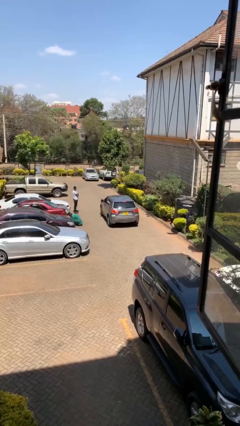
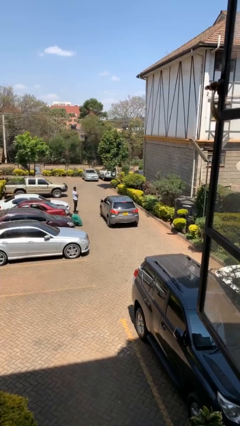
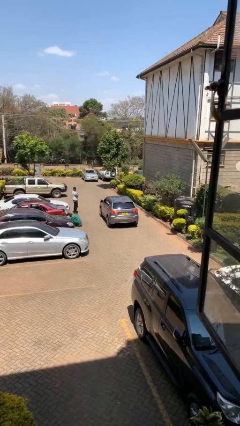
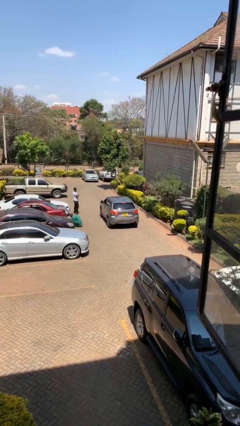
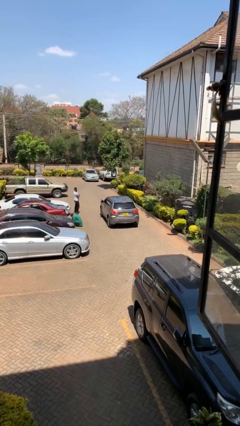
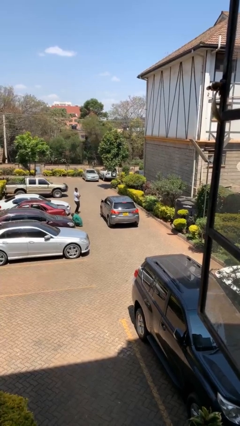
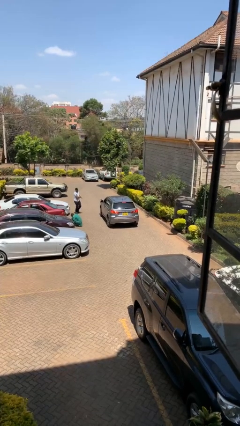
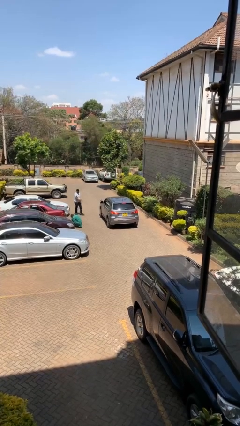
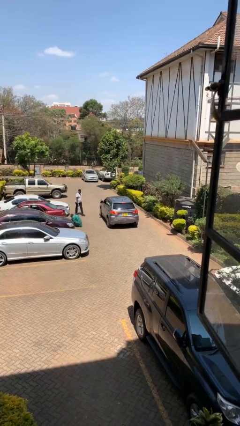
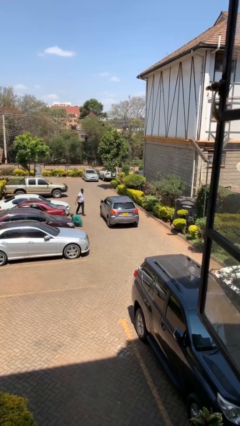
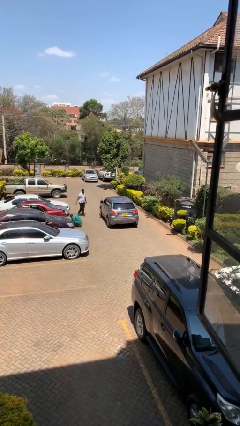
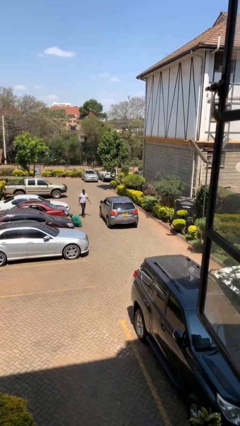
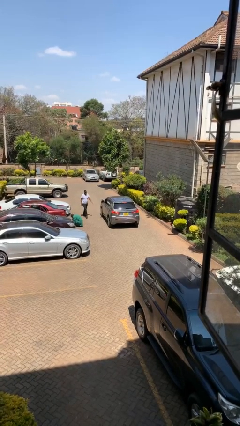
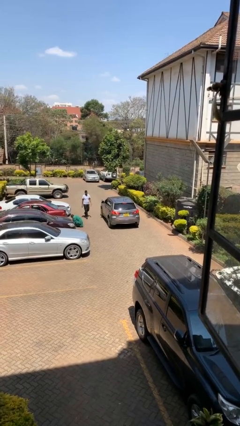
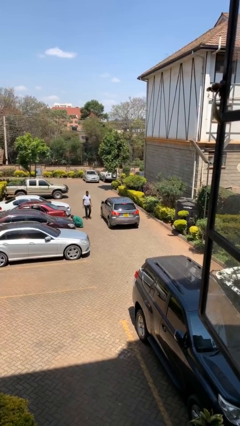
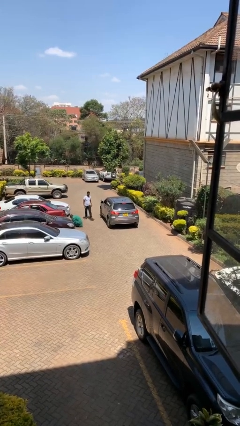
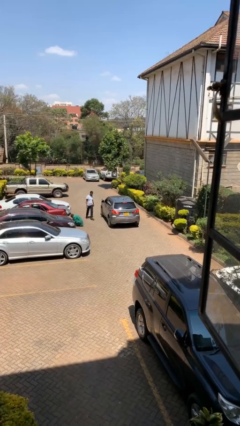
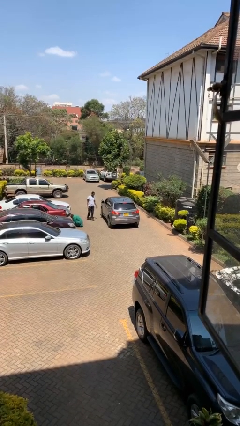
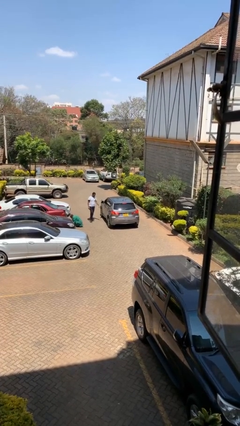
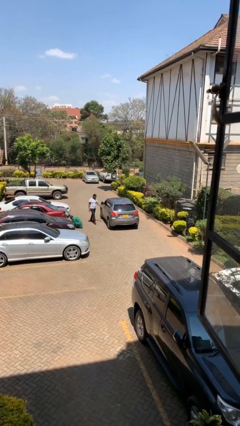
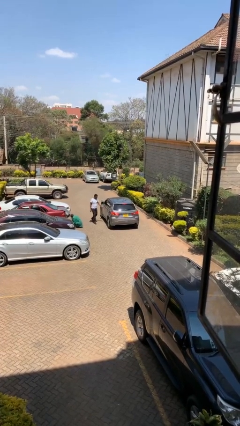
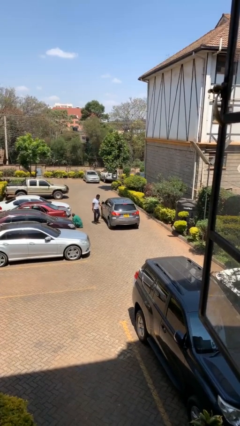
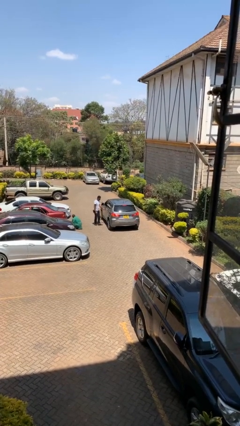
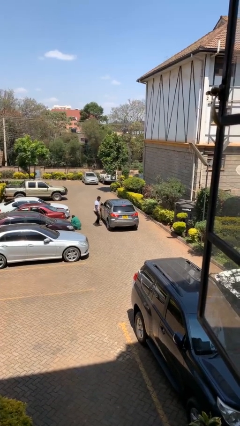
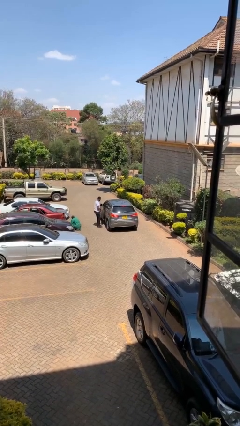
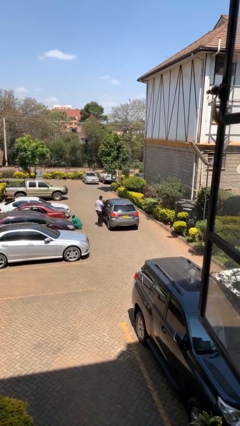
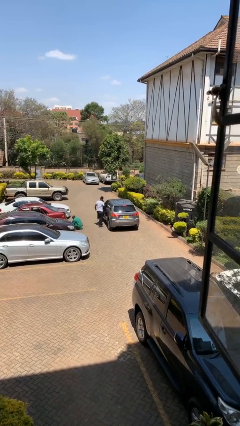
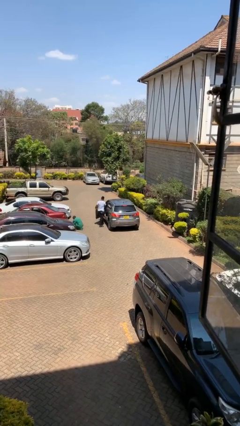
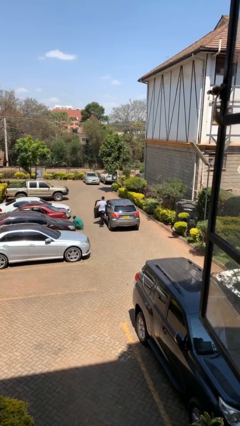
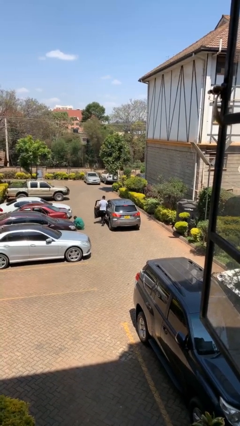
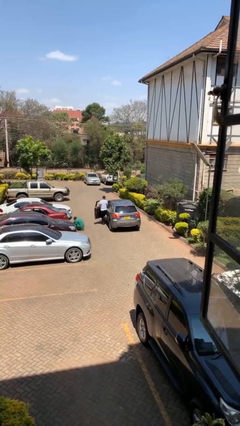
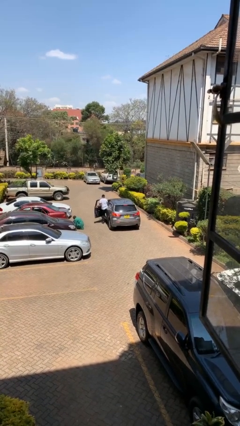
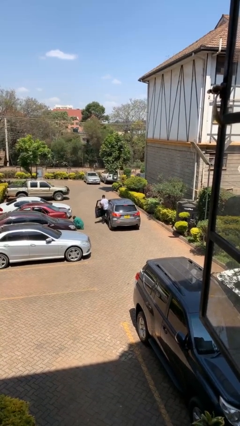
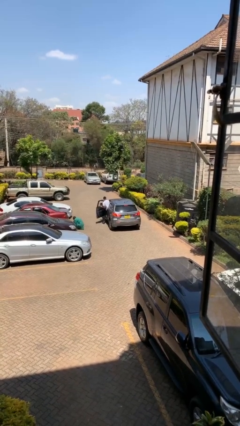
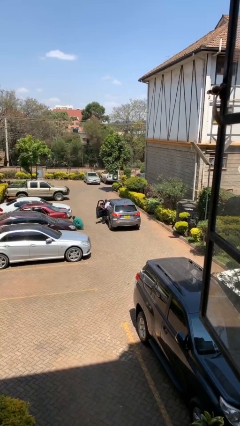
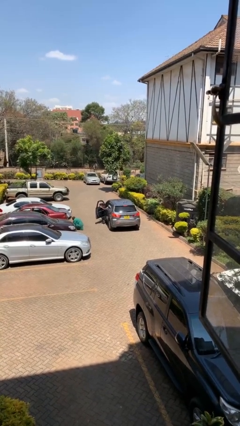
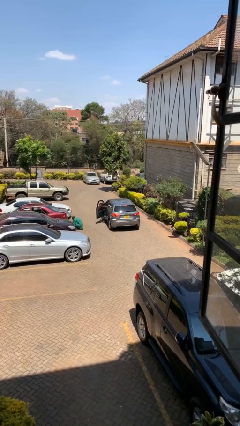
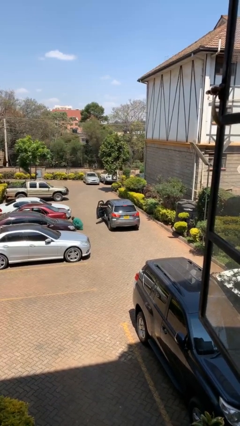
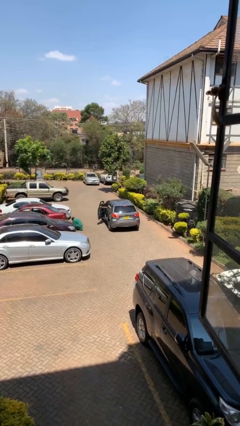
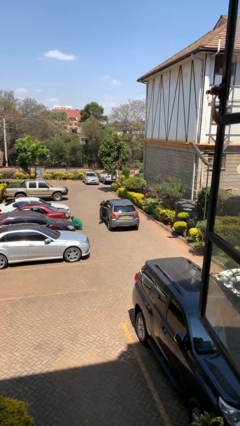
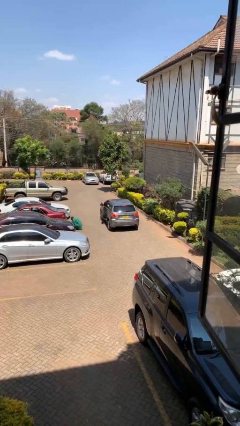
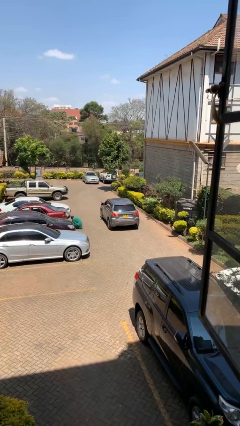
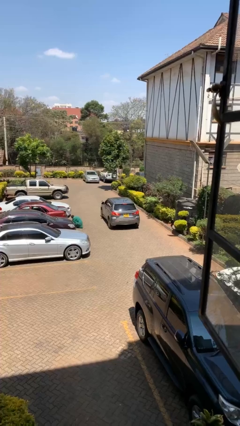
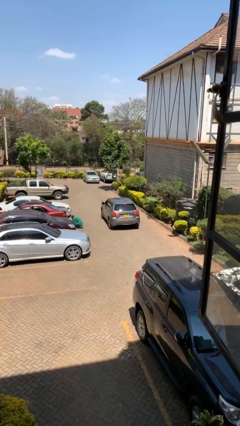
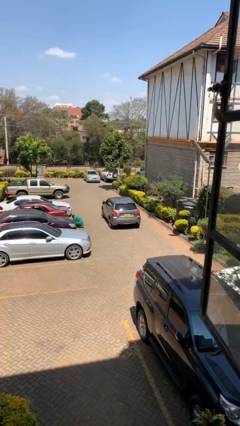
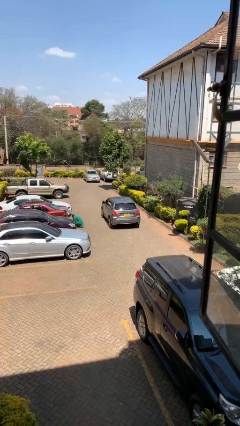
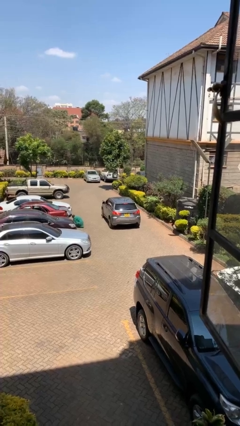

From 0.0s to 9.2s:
car picks up person

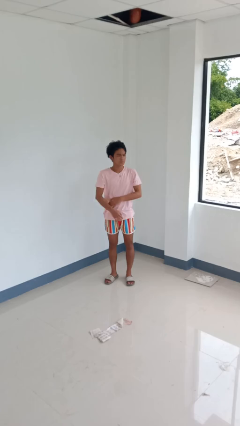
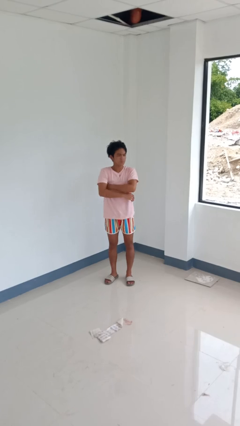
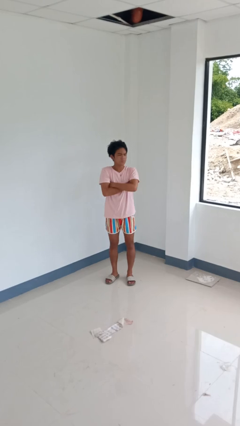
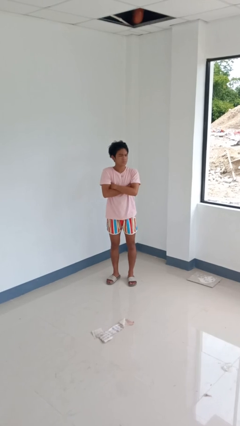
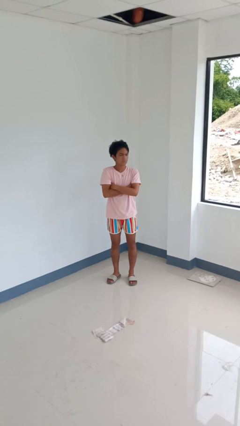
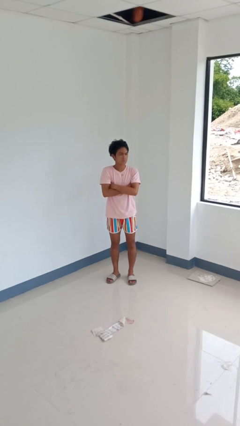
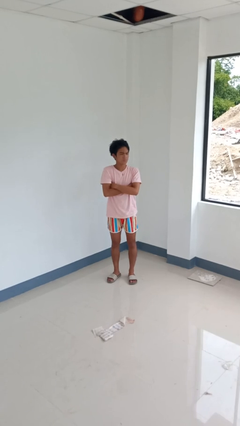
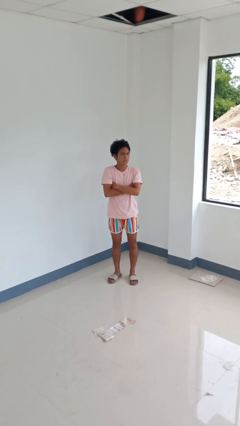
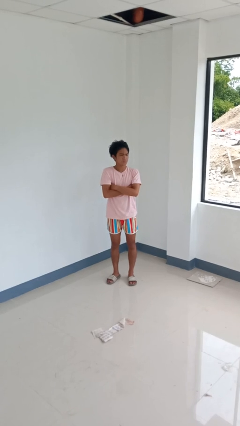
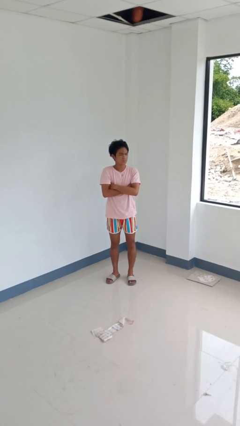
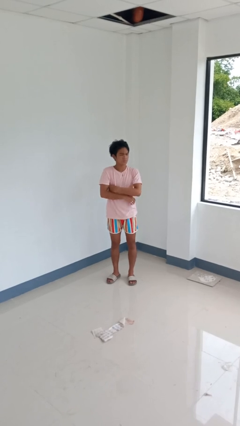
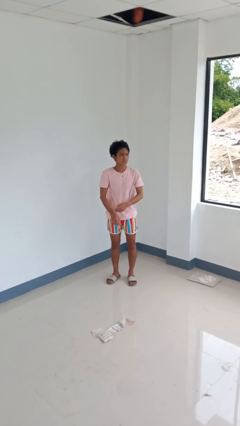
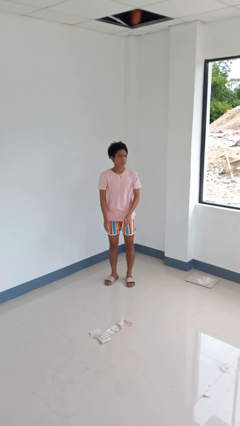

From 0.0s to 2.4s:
person crosses arms

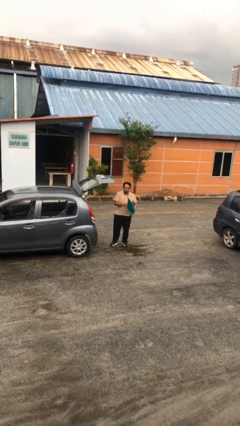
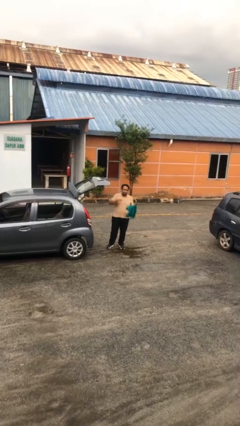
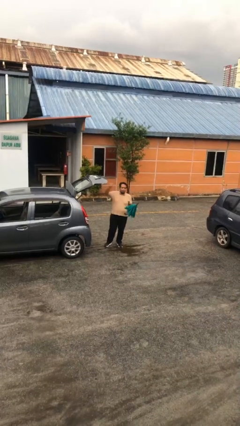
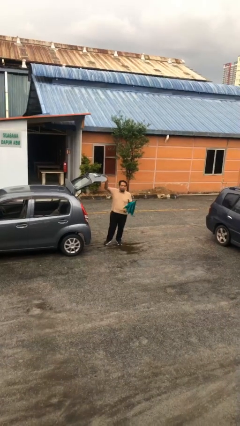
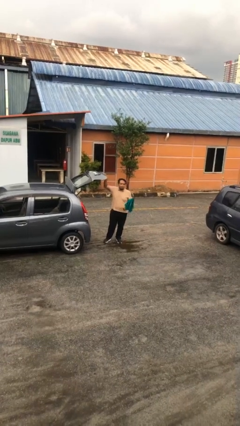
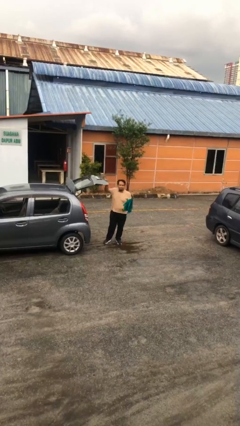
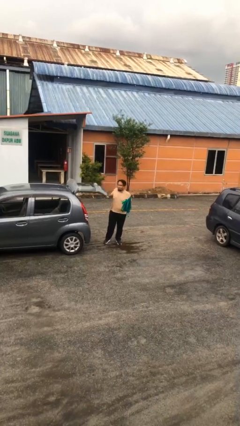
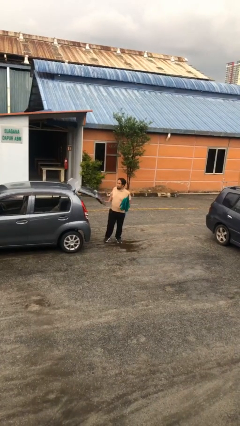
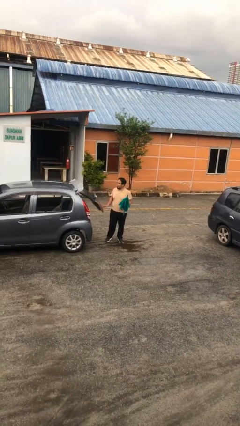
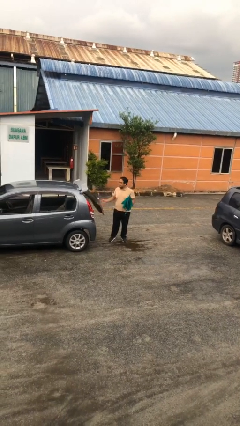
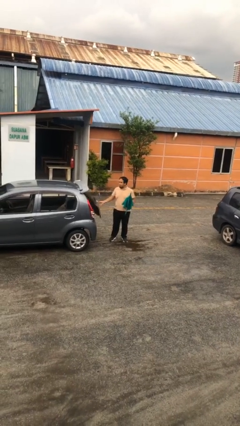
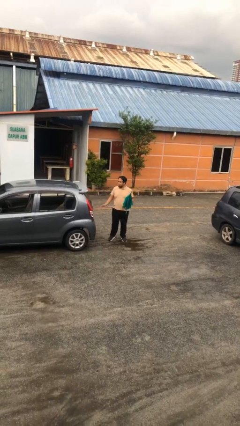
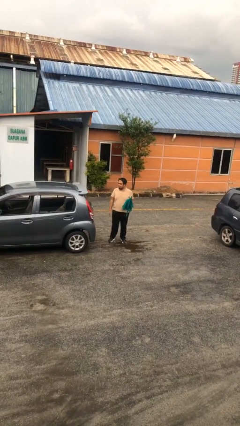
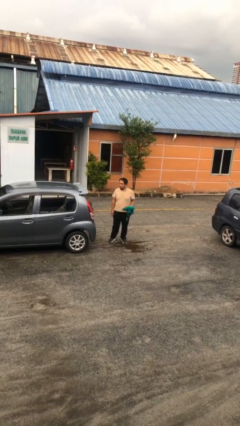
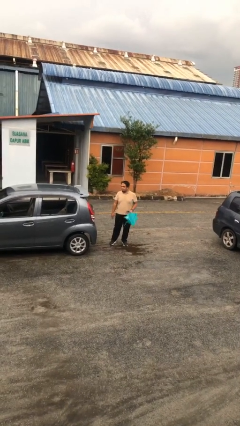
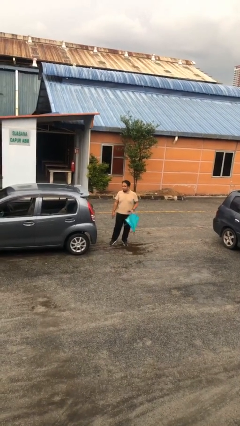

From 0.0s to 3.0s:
person closes car trunk

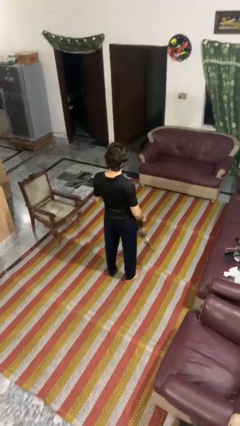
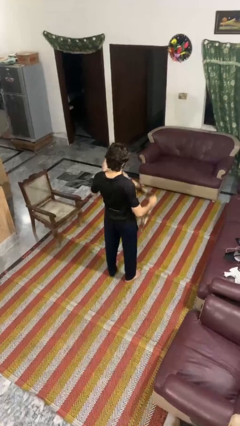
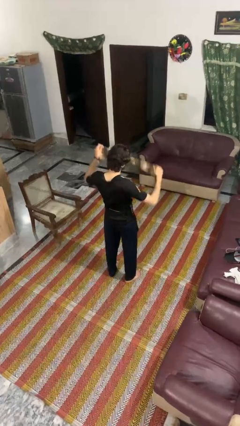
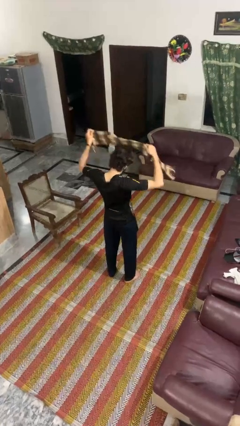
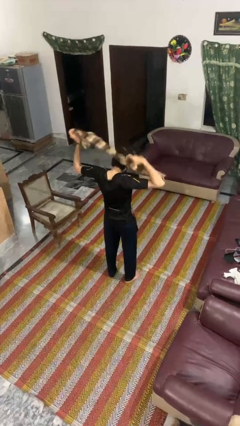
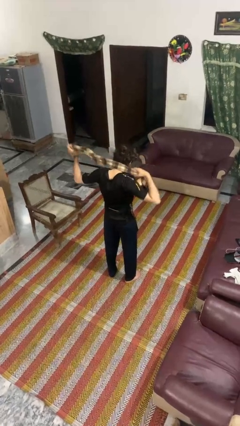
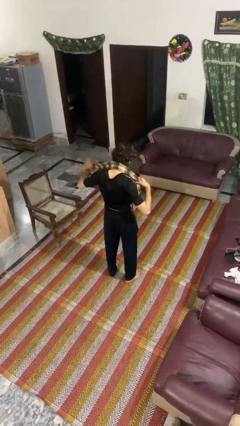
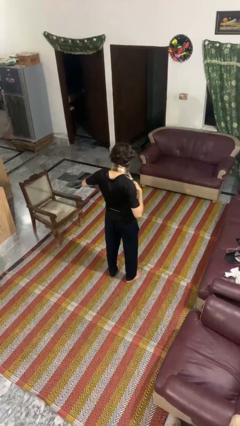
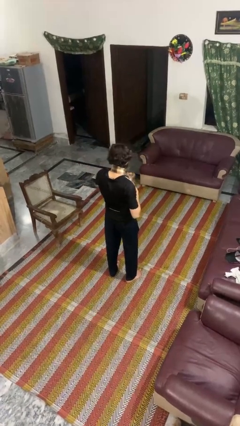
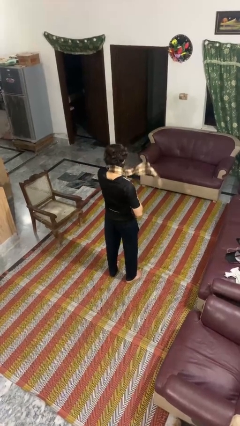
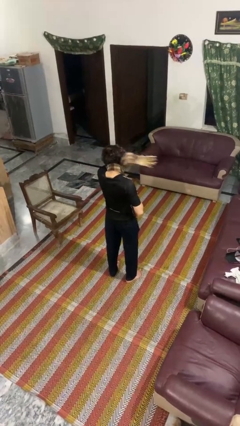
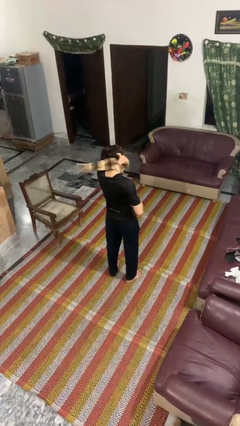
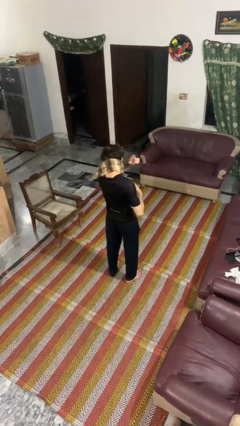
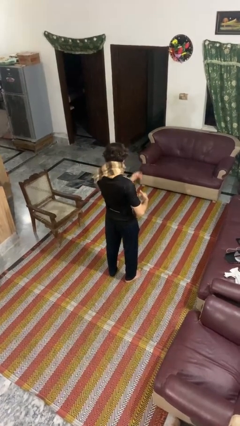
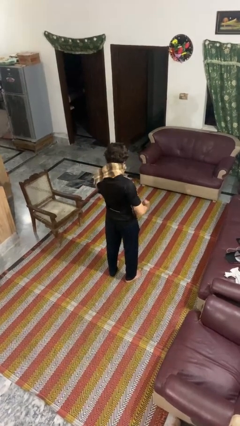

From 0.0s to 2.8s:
person puts on scarf

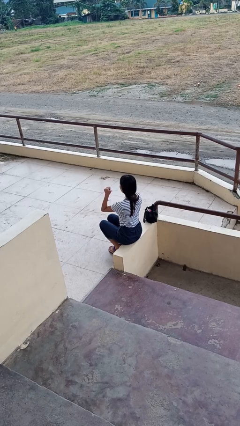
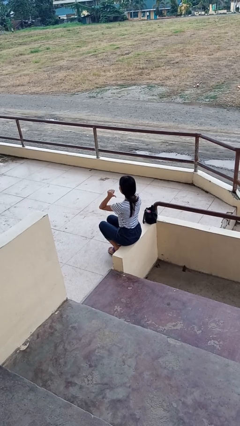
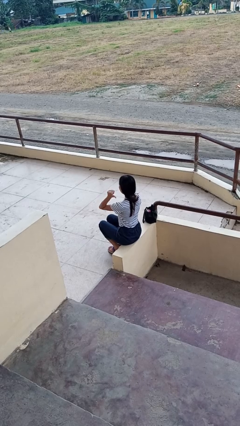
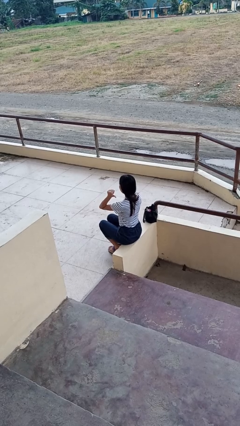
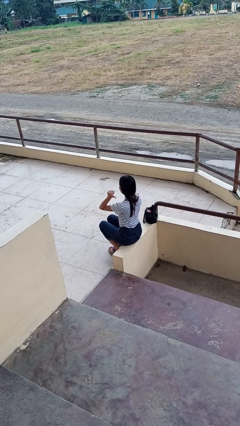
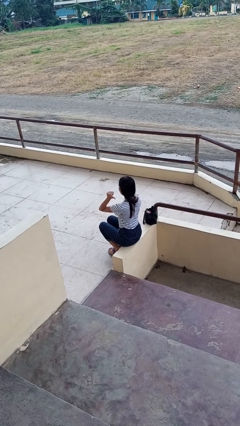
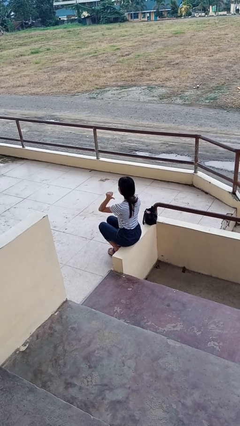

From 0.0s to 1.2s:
person gestures behind me
